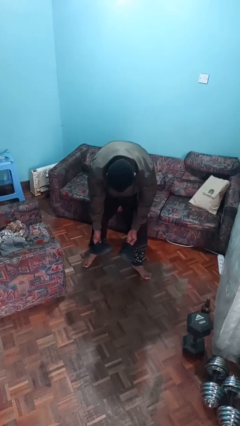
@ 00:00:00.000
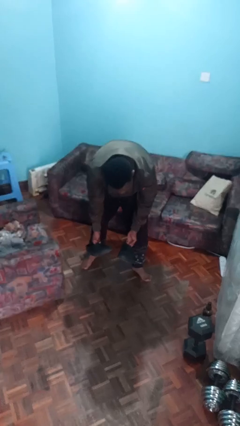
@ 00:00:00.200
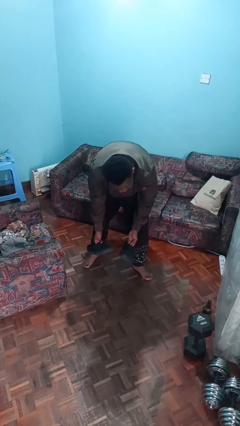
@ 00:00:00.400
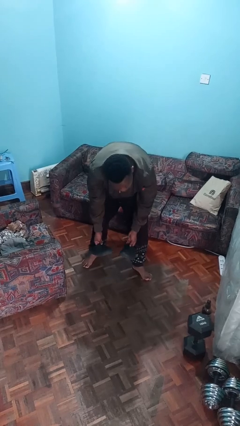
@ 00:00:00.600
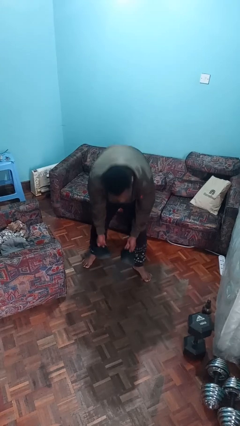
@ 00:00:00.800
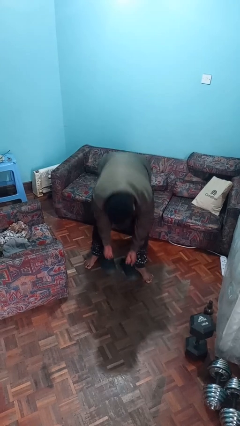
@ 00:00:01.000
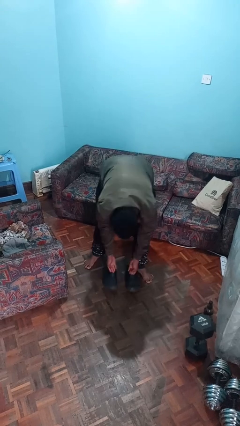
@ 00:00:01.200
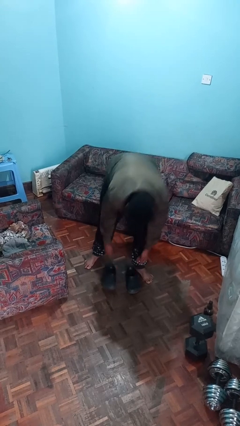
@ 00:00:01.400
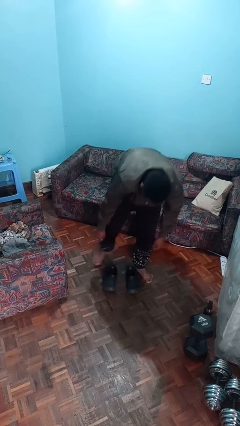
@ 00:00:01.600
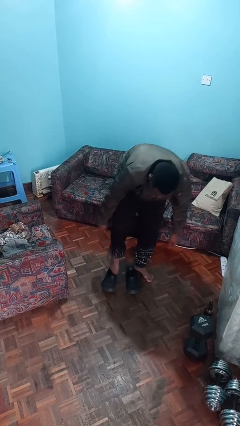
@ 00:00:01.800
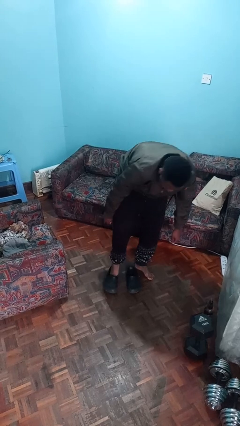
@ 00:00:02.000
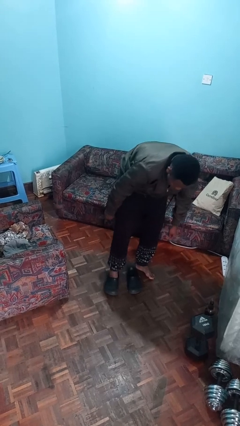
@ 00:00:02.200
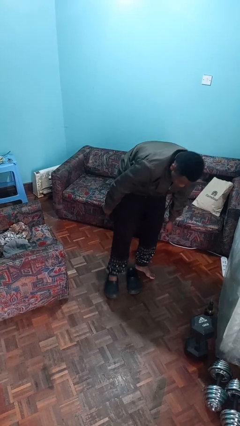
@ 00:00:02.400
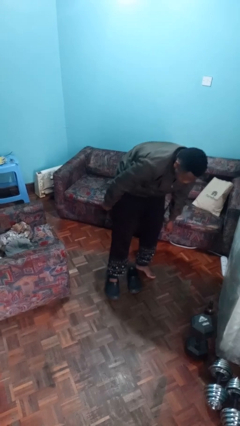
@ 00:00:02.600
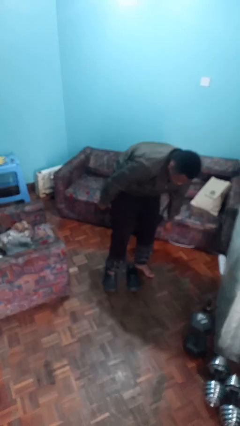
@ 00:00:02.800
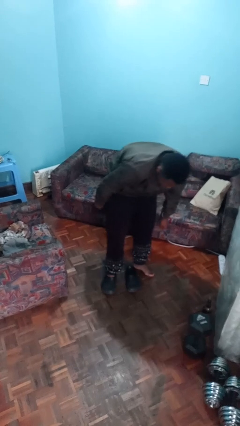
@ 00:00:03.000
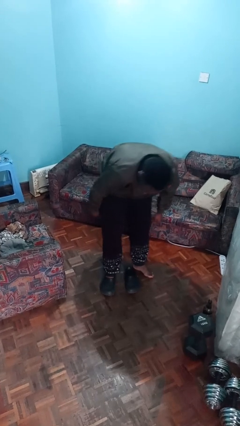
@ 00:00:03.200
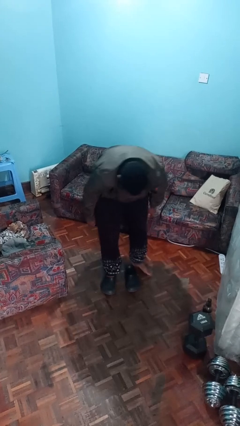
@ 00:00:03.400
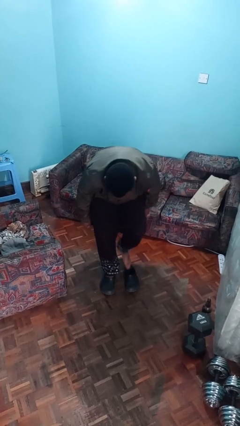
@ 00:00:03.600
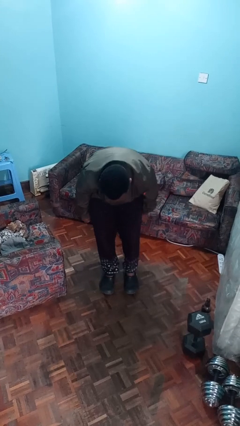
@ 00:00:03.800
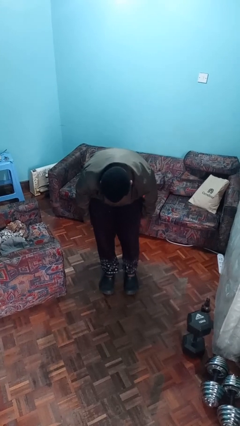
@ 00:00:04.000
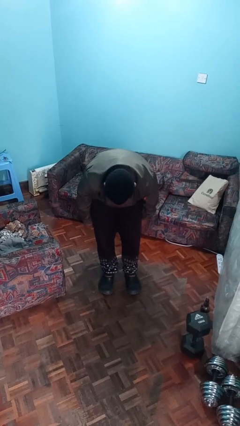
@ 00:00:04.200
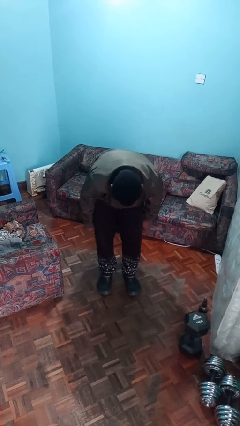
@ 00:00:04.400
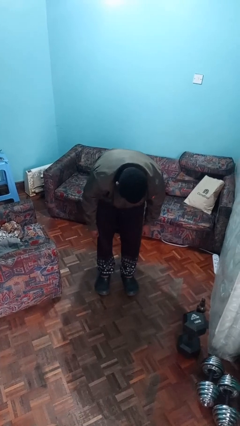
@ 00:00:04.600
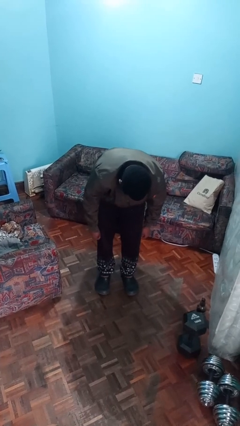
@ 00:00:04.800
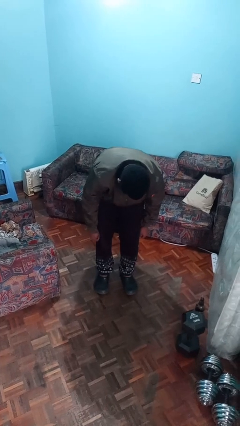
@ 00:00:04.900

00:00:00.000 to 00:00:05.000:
person puts on shoes

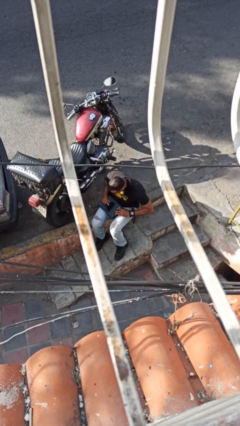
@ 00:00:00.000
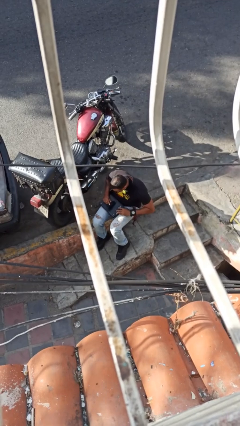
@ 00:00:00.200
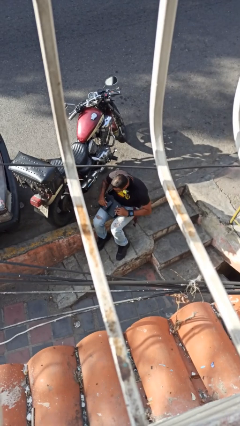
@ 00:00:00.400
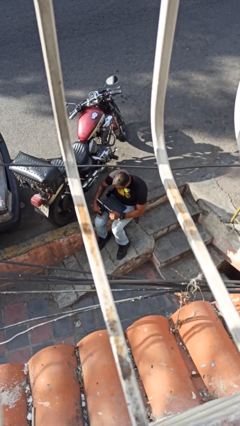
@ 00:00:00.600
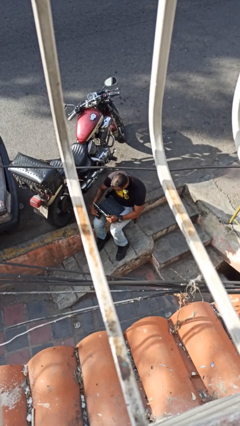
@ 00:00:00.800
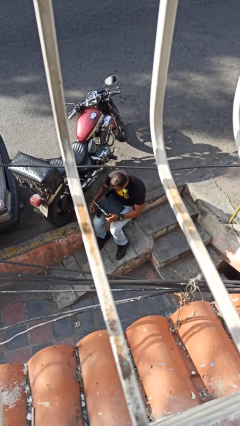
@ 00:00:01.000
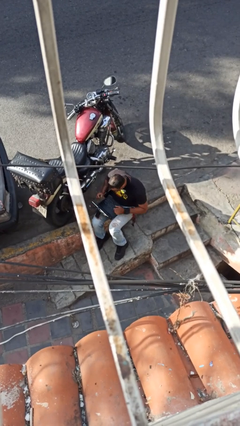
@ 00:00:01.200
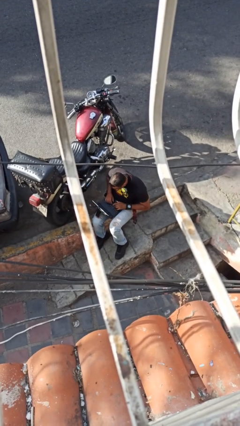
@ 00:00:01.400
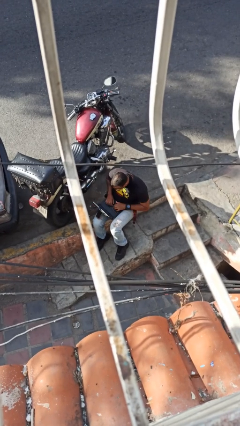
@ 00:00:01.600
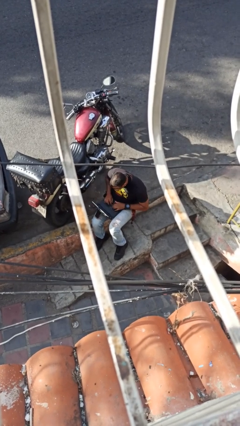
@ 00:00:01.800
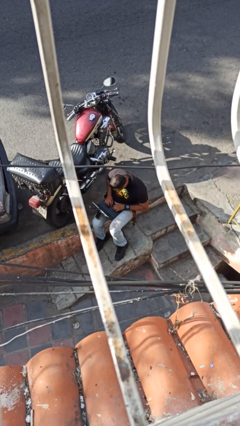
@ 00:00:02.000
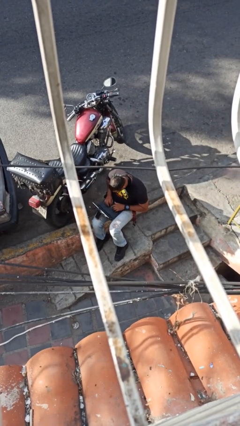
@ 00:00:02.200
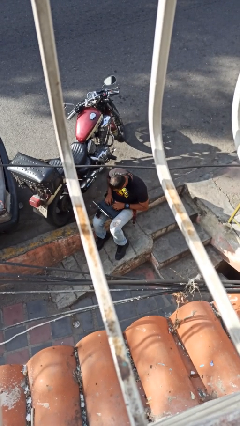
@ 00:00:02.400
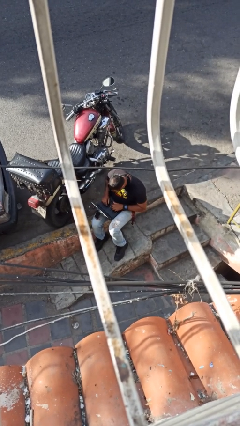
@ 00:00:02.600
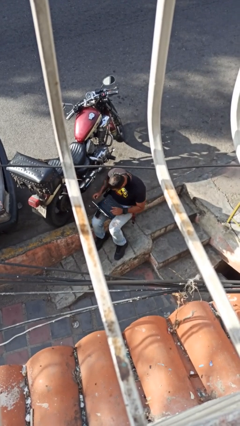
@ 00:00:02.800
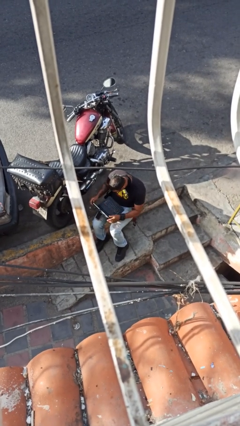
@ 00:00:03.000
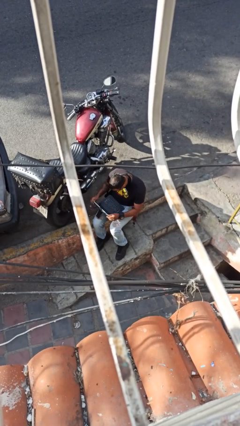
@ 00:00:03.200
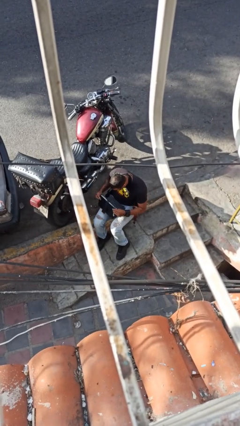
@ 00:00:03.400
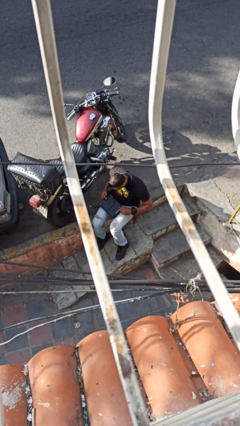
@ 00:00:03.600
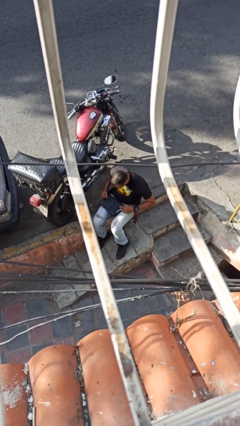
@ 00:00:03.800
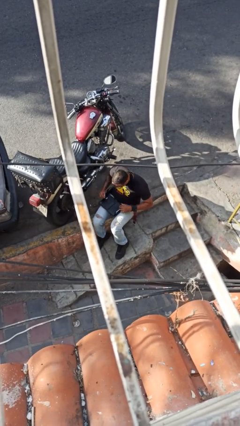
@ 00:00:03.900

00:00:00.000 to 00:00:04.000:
person interacts with laptop

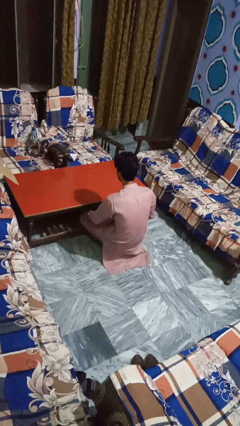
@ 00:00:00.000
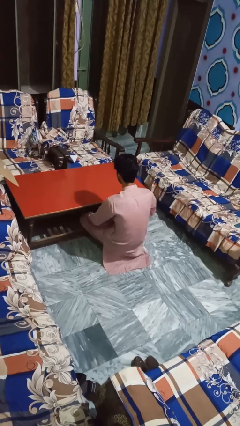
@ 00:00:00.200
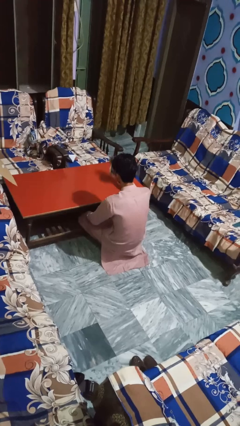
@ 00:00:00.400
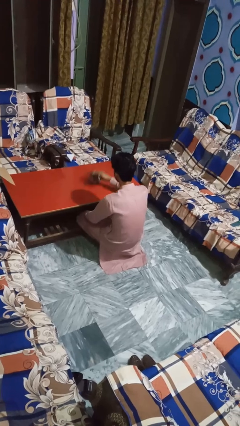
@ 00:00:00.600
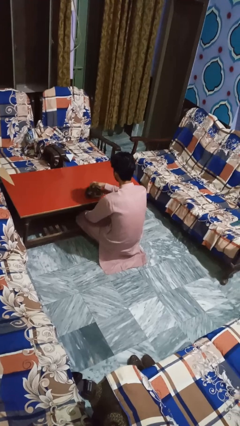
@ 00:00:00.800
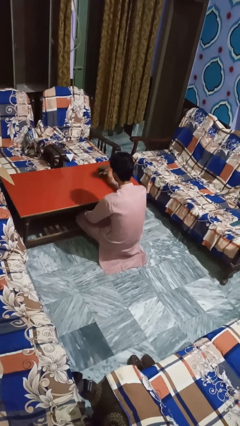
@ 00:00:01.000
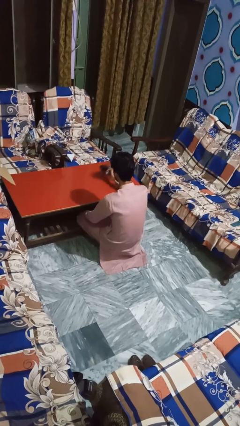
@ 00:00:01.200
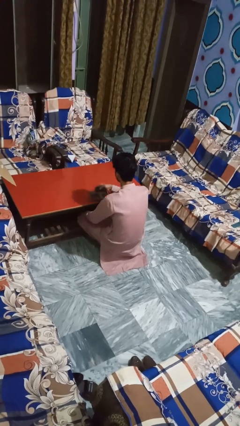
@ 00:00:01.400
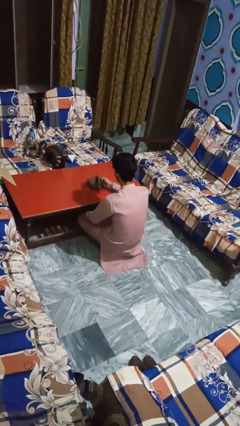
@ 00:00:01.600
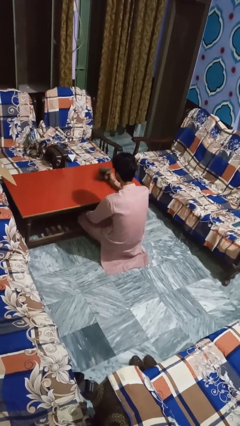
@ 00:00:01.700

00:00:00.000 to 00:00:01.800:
person cleans table with rag

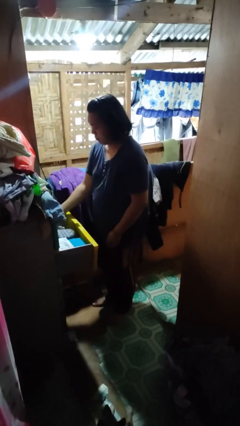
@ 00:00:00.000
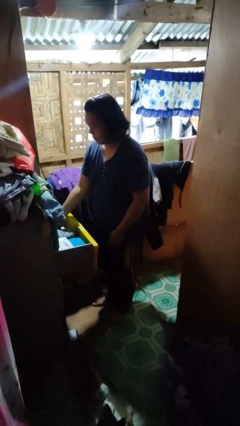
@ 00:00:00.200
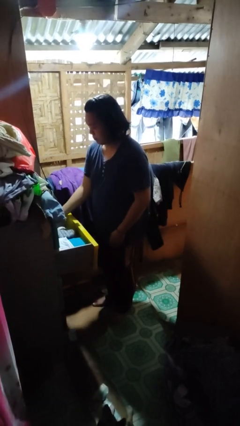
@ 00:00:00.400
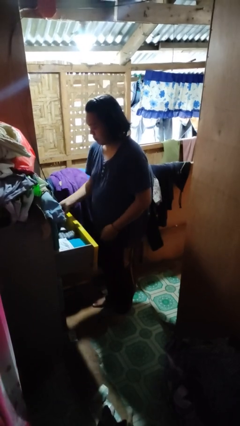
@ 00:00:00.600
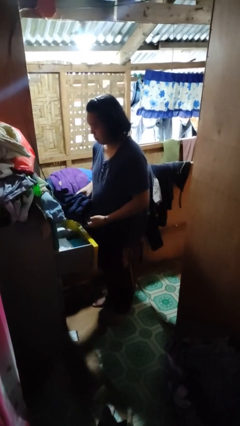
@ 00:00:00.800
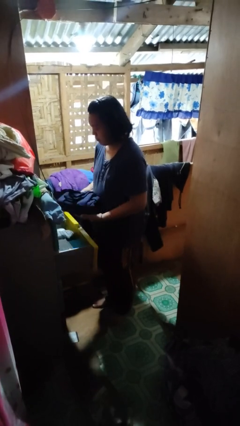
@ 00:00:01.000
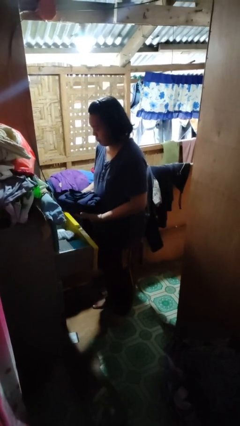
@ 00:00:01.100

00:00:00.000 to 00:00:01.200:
person takes clothes from dresser

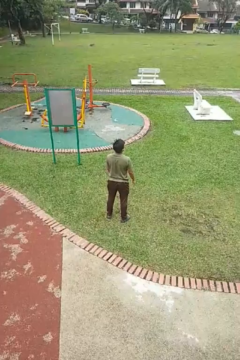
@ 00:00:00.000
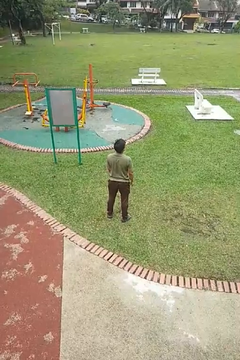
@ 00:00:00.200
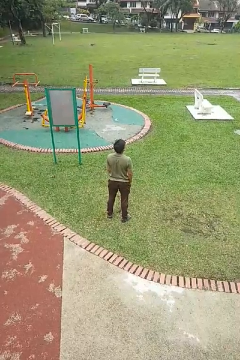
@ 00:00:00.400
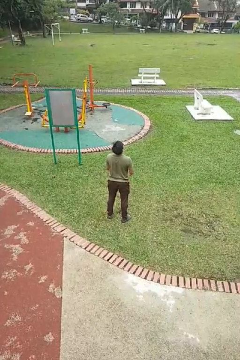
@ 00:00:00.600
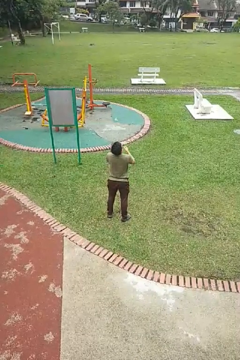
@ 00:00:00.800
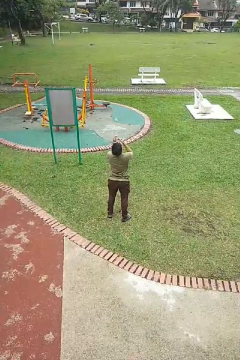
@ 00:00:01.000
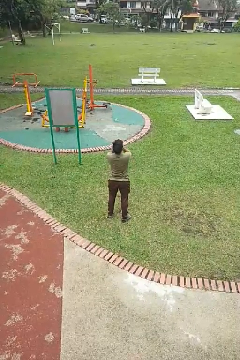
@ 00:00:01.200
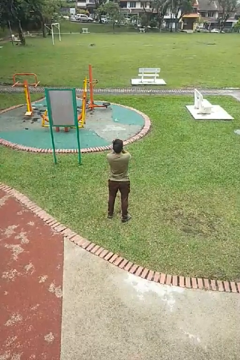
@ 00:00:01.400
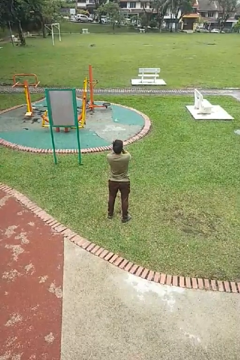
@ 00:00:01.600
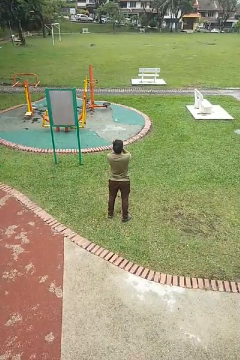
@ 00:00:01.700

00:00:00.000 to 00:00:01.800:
person sneezes into hand

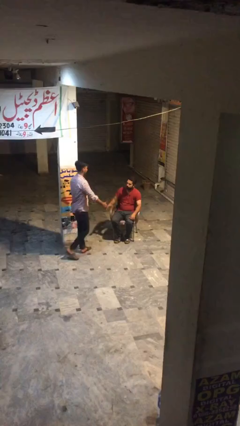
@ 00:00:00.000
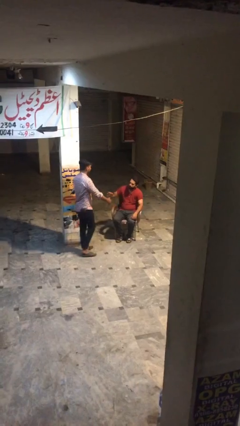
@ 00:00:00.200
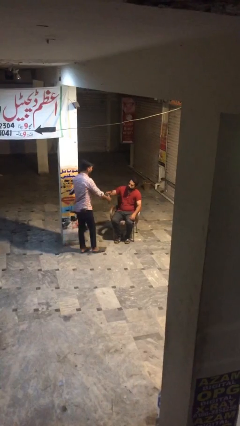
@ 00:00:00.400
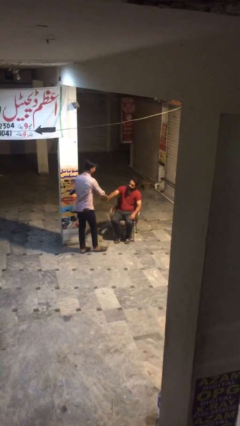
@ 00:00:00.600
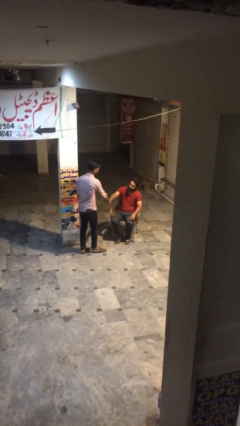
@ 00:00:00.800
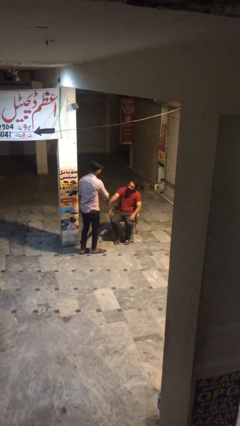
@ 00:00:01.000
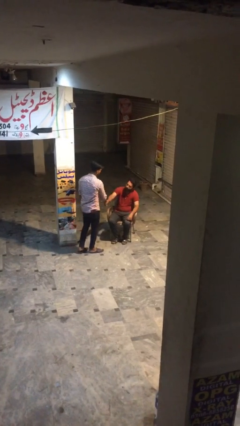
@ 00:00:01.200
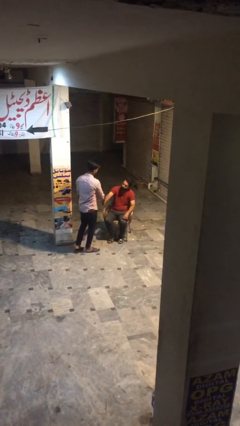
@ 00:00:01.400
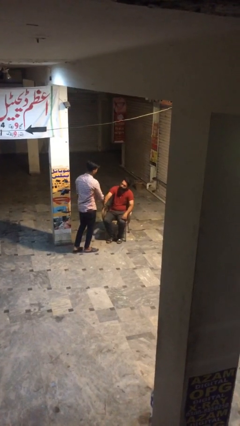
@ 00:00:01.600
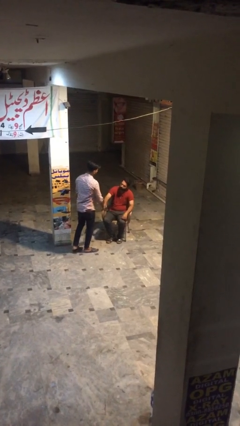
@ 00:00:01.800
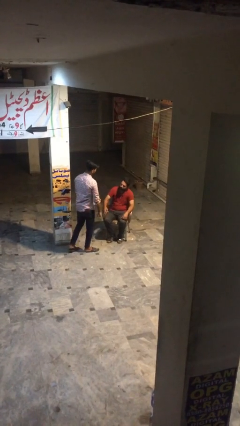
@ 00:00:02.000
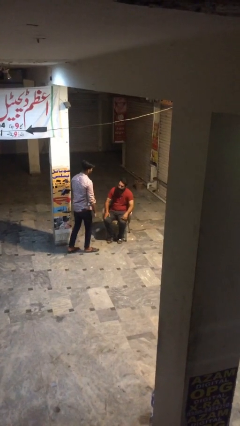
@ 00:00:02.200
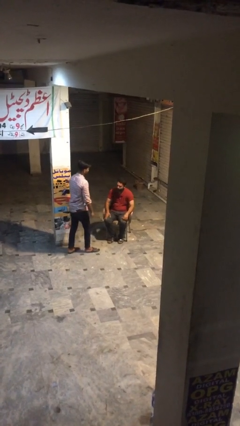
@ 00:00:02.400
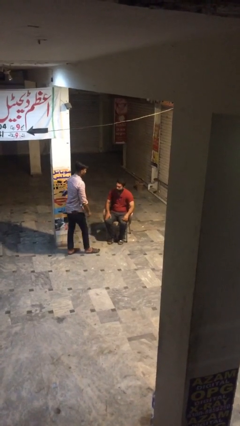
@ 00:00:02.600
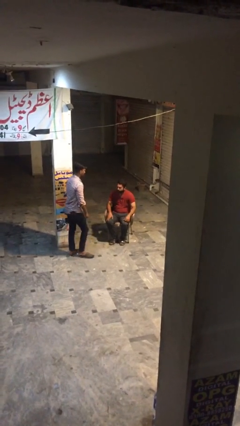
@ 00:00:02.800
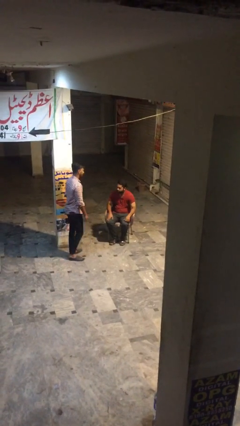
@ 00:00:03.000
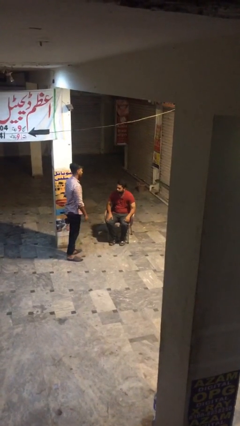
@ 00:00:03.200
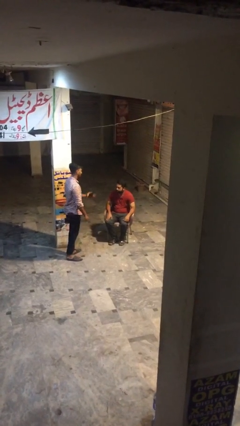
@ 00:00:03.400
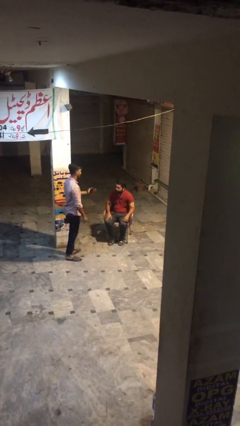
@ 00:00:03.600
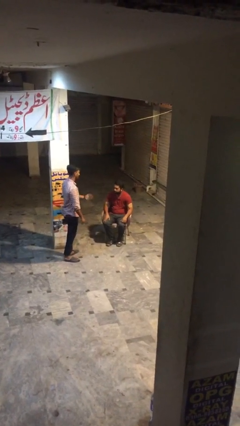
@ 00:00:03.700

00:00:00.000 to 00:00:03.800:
person shakes hand
